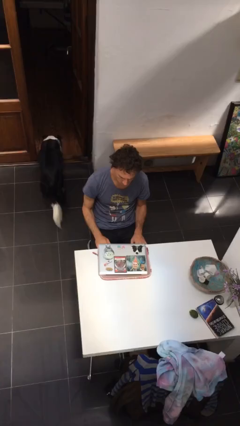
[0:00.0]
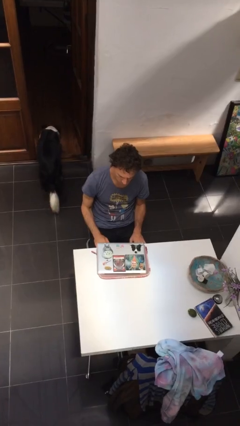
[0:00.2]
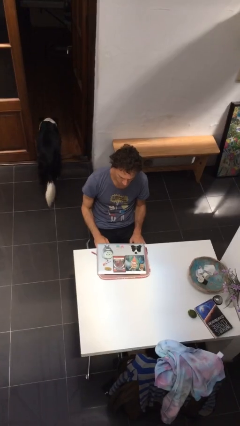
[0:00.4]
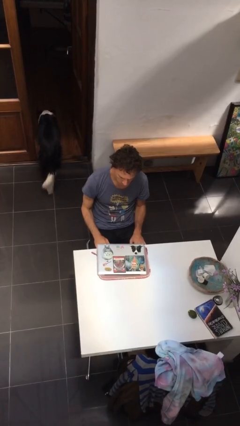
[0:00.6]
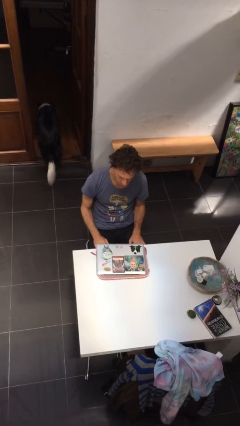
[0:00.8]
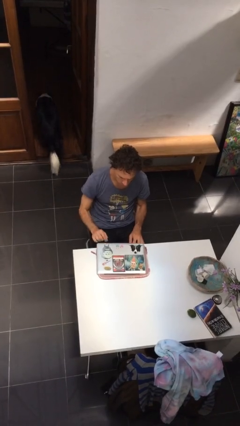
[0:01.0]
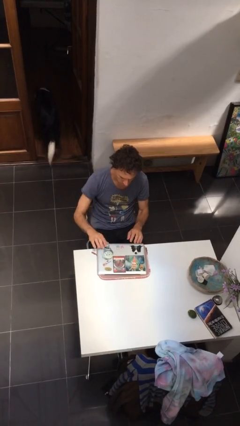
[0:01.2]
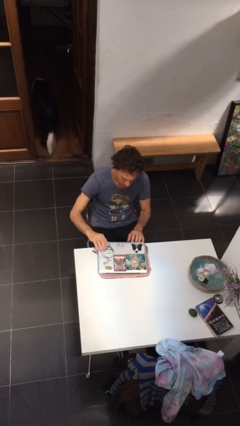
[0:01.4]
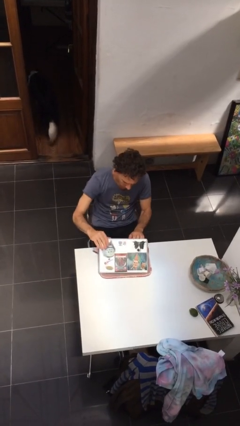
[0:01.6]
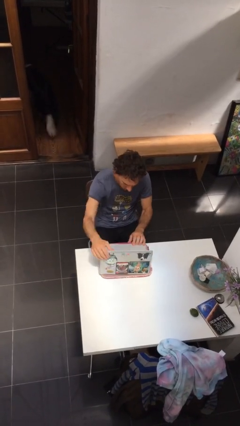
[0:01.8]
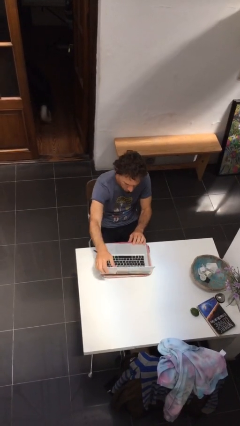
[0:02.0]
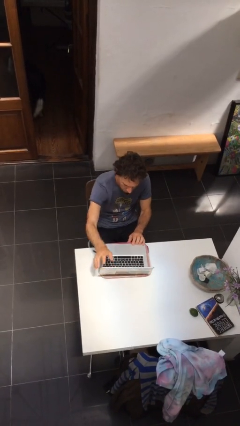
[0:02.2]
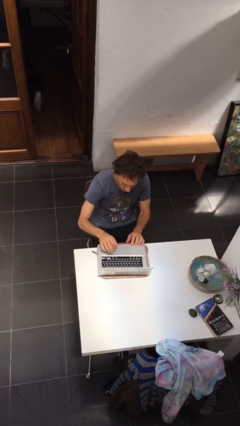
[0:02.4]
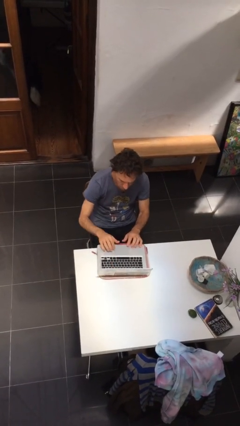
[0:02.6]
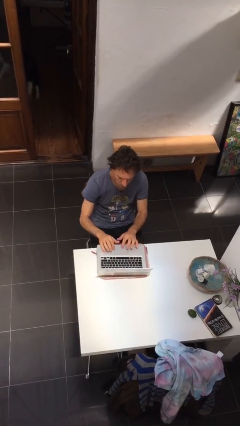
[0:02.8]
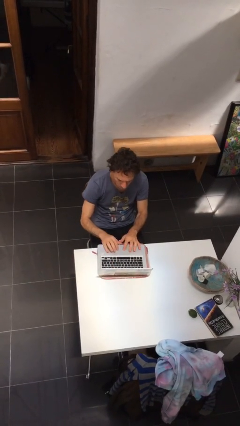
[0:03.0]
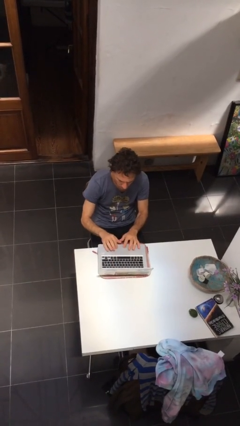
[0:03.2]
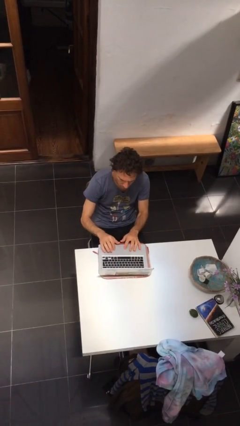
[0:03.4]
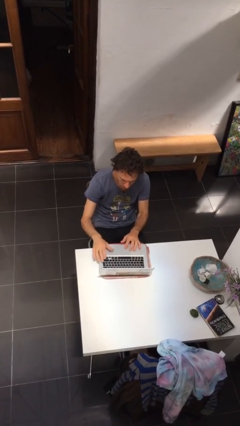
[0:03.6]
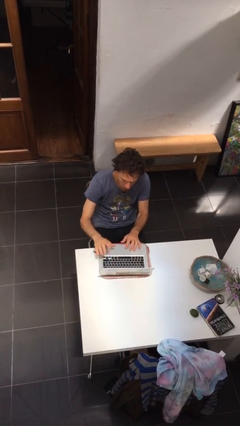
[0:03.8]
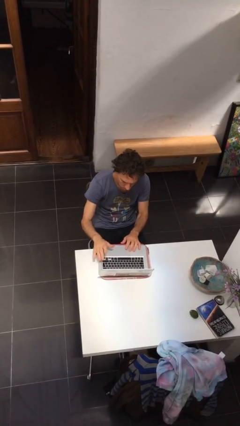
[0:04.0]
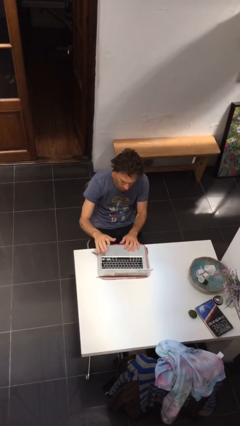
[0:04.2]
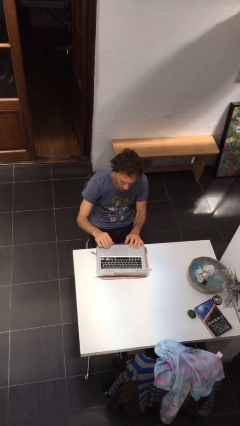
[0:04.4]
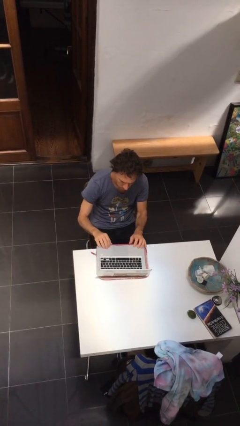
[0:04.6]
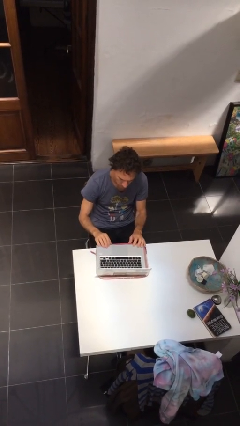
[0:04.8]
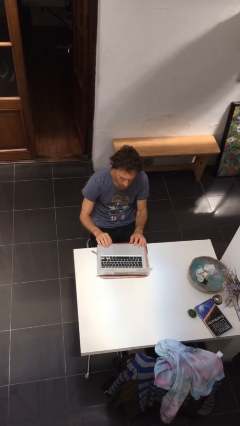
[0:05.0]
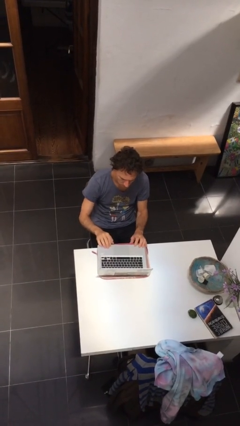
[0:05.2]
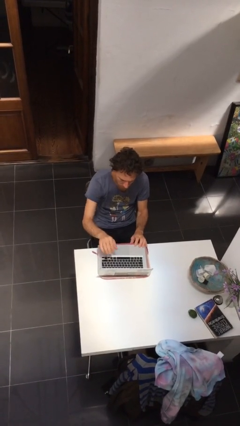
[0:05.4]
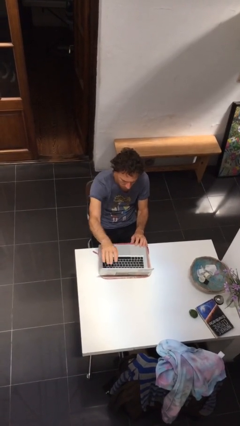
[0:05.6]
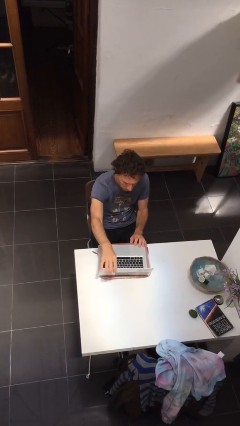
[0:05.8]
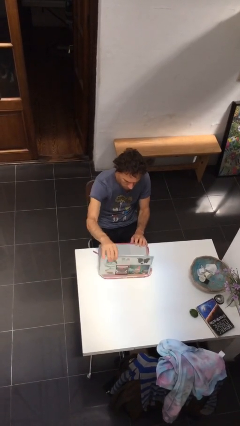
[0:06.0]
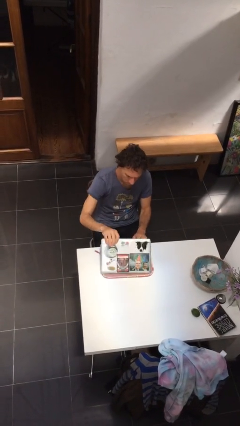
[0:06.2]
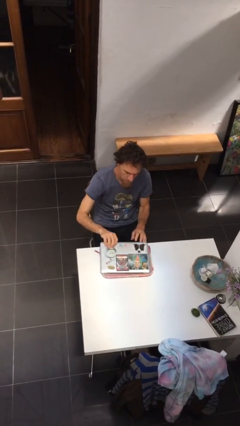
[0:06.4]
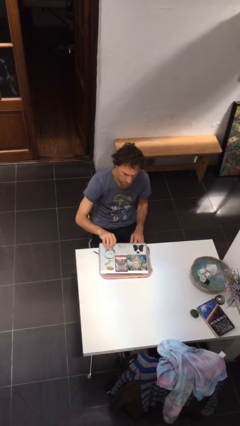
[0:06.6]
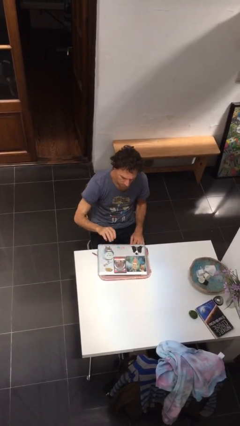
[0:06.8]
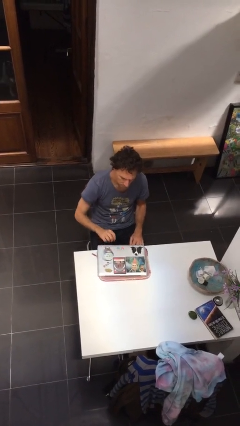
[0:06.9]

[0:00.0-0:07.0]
person interacts with laptop

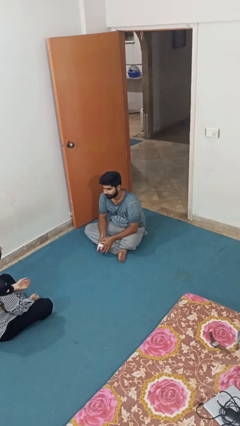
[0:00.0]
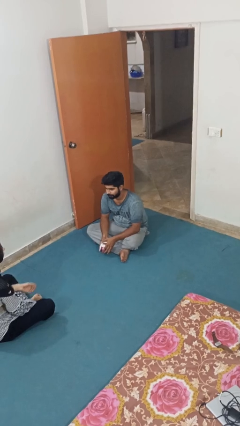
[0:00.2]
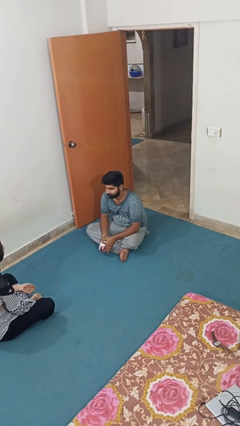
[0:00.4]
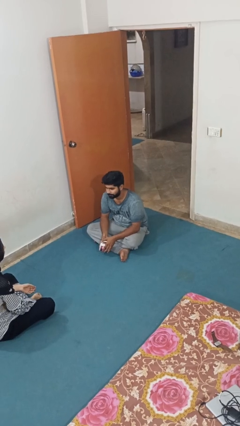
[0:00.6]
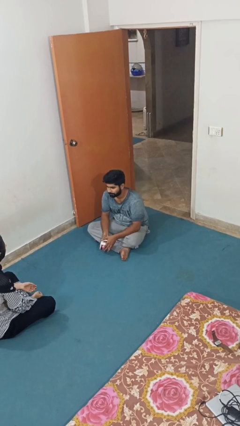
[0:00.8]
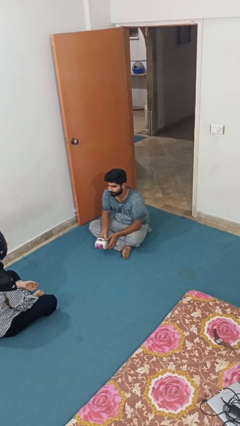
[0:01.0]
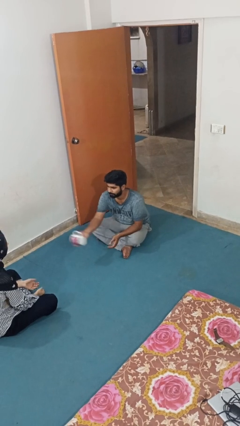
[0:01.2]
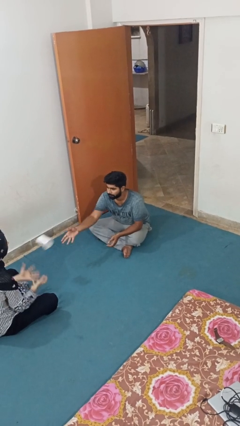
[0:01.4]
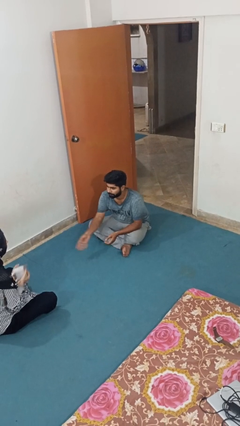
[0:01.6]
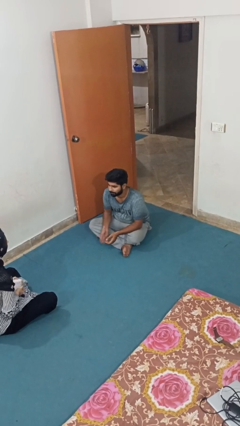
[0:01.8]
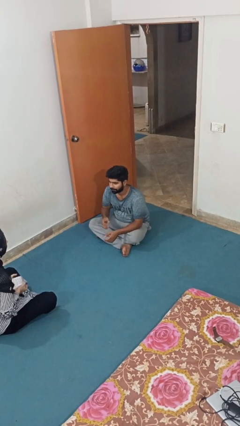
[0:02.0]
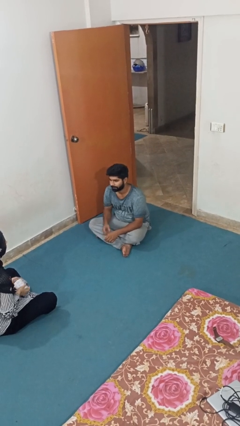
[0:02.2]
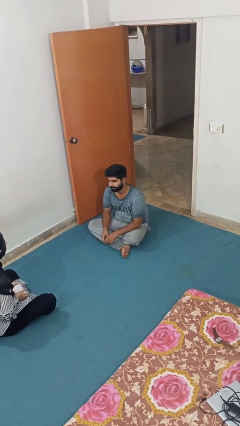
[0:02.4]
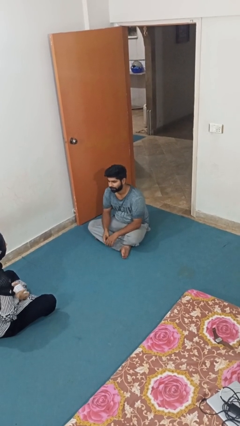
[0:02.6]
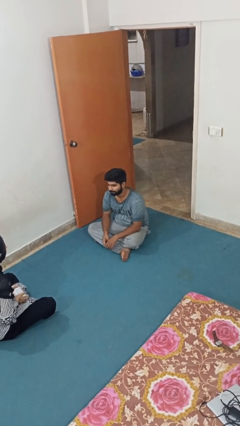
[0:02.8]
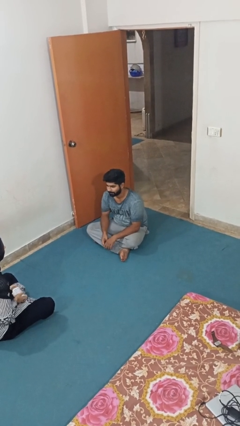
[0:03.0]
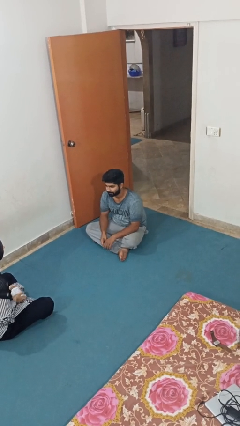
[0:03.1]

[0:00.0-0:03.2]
person throws object to person

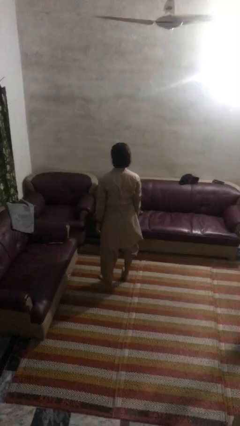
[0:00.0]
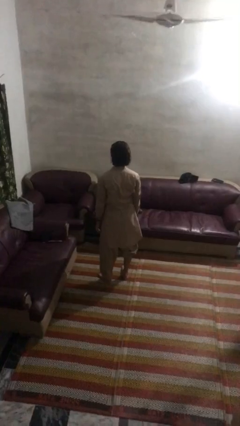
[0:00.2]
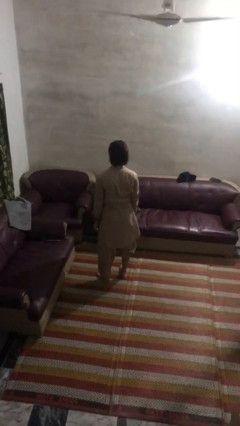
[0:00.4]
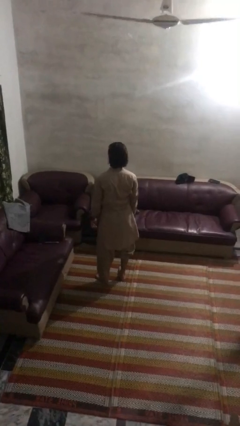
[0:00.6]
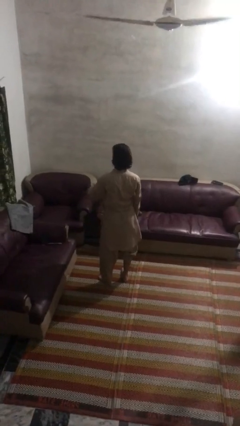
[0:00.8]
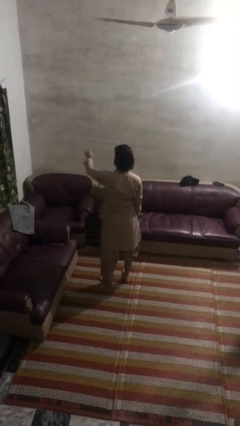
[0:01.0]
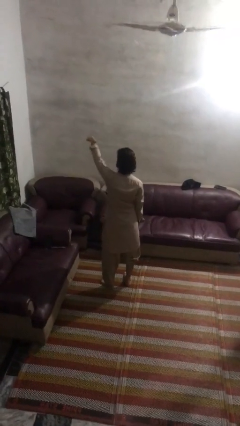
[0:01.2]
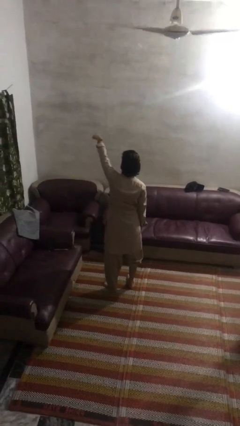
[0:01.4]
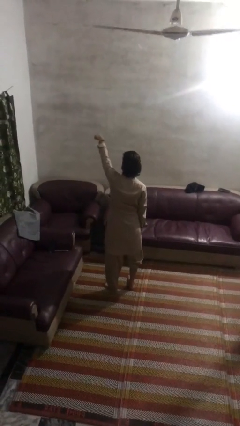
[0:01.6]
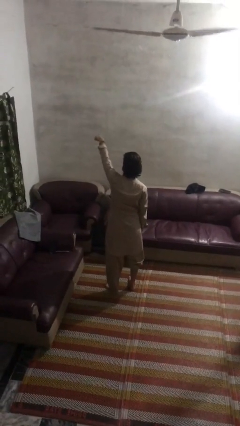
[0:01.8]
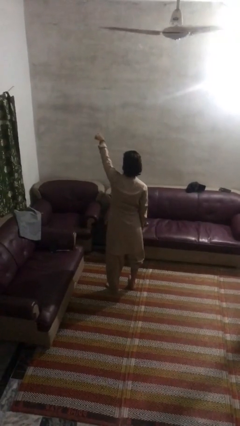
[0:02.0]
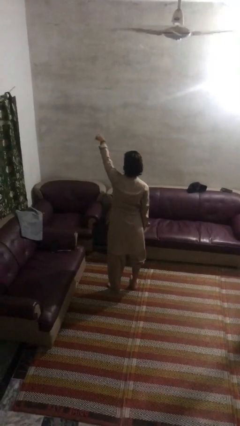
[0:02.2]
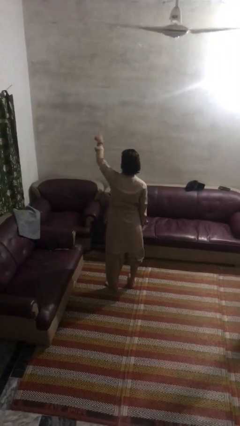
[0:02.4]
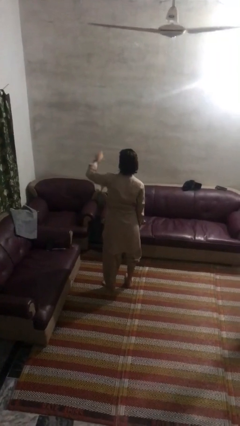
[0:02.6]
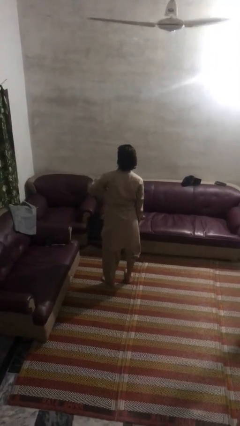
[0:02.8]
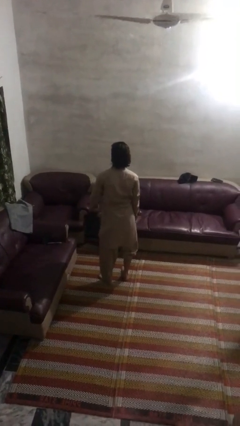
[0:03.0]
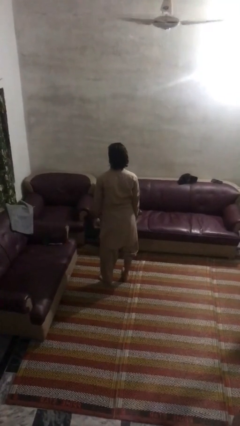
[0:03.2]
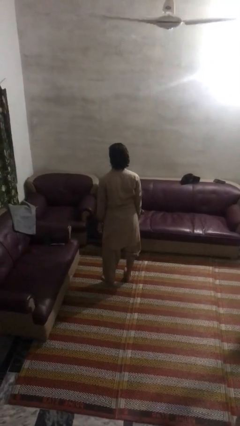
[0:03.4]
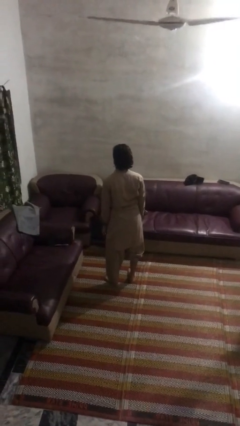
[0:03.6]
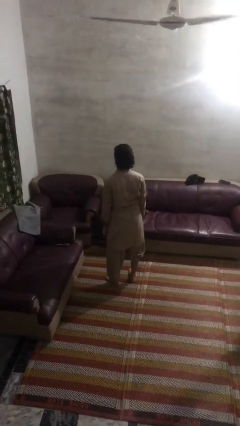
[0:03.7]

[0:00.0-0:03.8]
person points at person

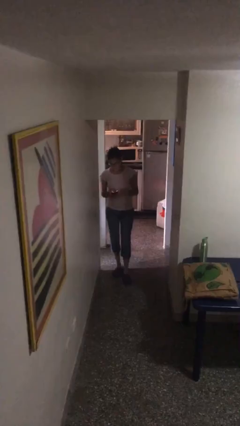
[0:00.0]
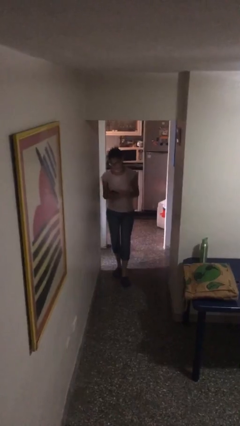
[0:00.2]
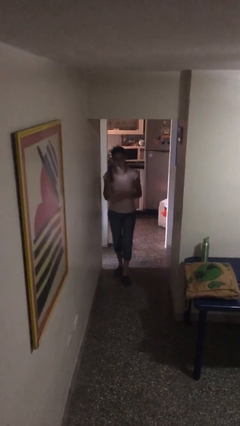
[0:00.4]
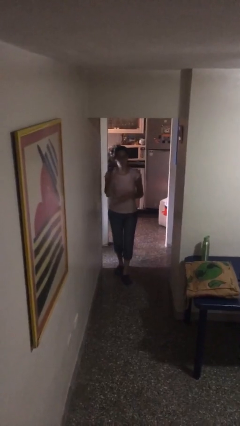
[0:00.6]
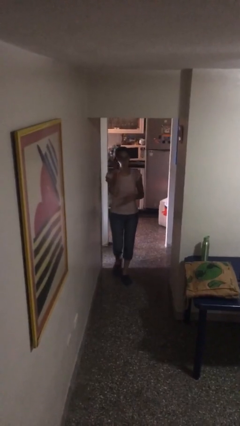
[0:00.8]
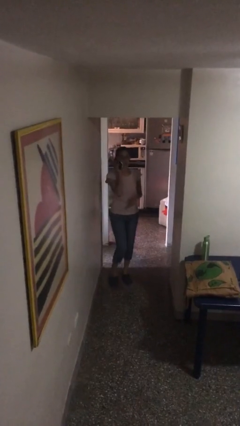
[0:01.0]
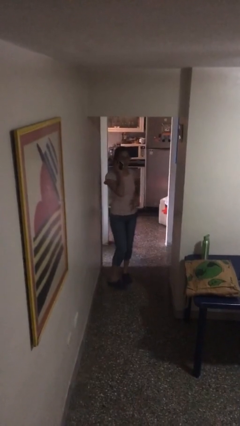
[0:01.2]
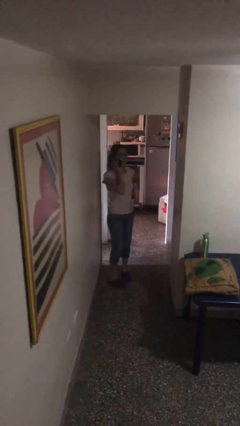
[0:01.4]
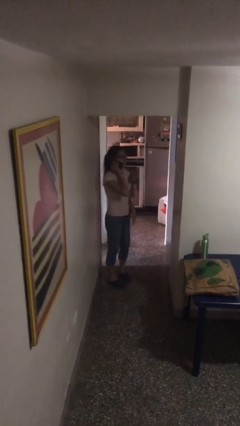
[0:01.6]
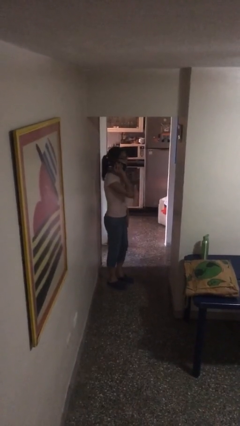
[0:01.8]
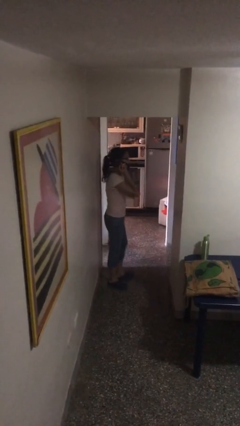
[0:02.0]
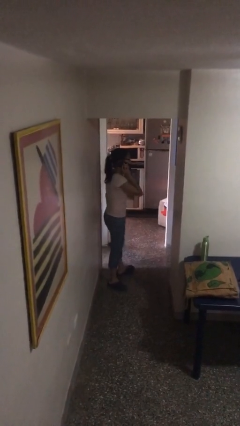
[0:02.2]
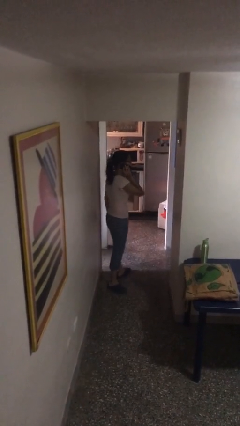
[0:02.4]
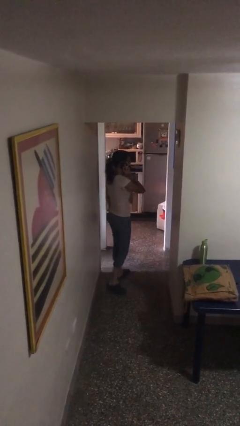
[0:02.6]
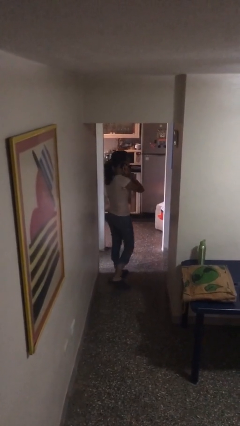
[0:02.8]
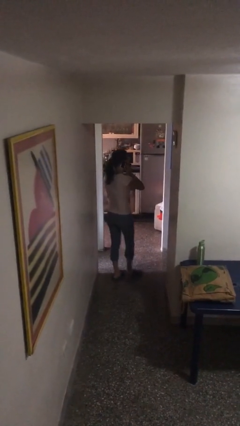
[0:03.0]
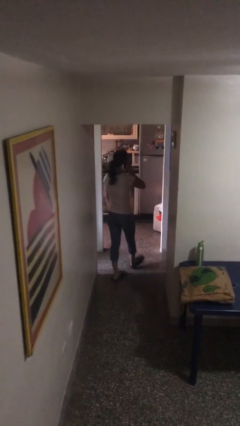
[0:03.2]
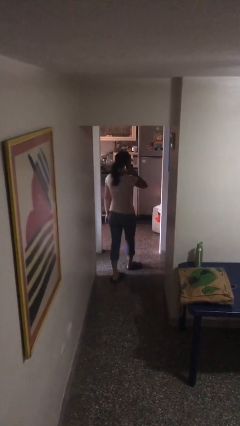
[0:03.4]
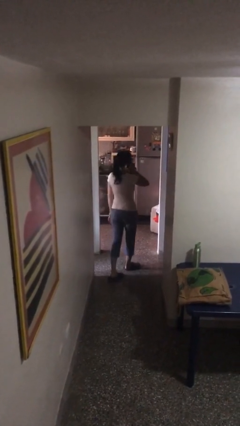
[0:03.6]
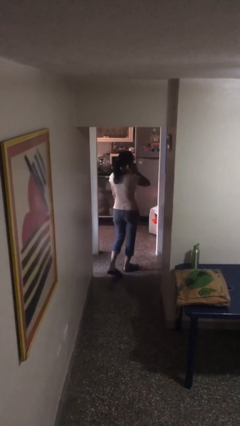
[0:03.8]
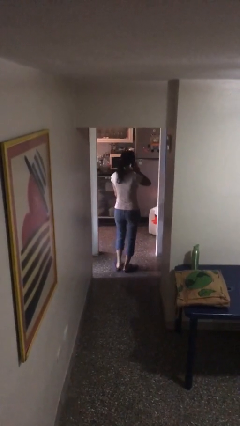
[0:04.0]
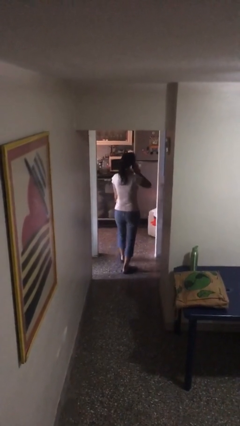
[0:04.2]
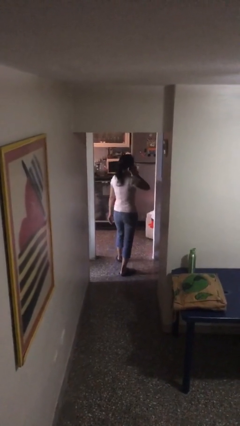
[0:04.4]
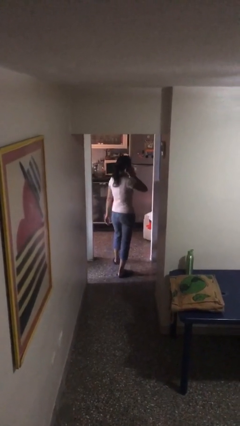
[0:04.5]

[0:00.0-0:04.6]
person talks on phone
